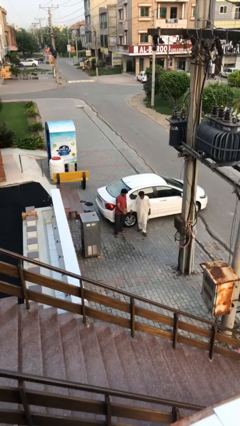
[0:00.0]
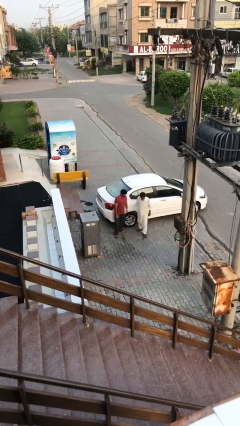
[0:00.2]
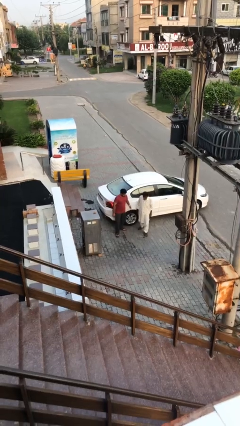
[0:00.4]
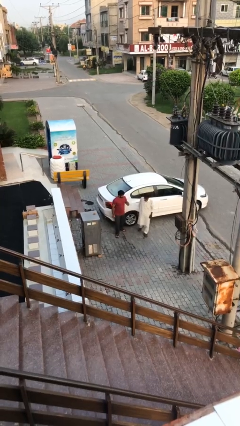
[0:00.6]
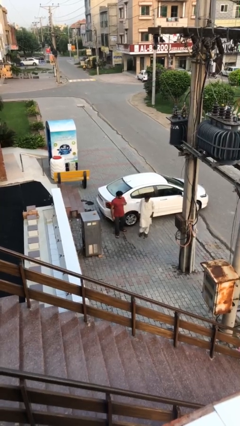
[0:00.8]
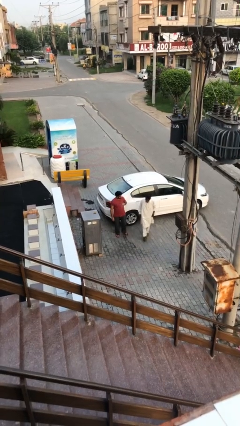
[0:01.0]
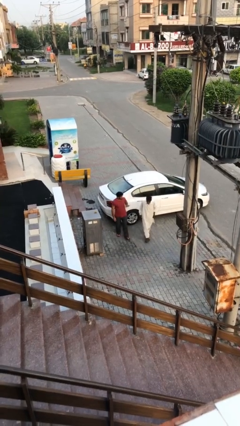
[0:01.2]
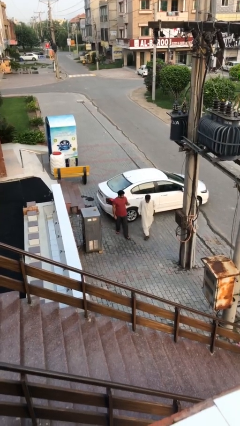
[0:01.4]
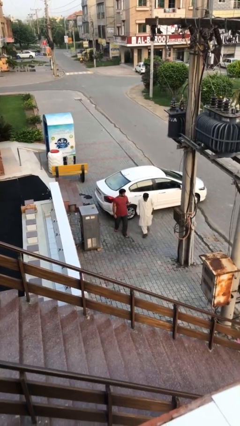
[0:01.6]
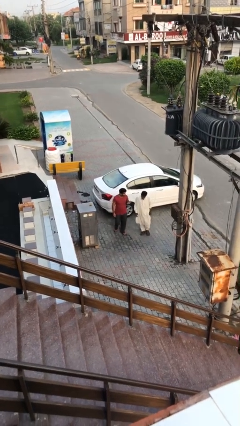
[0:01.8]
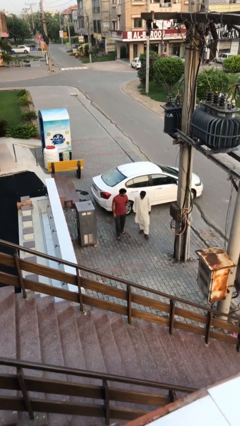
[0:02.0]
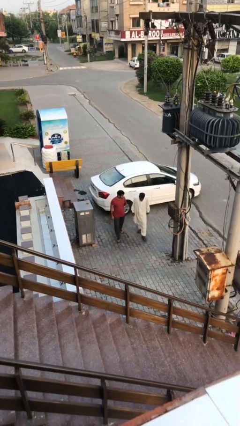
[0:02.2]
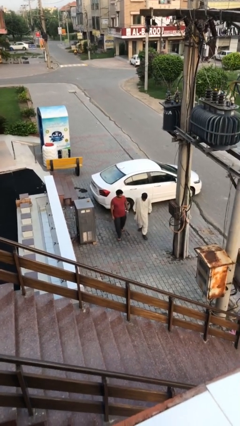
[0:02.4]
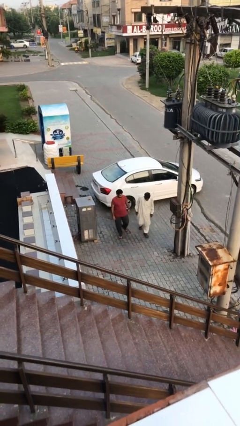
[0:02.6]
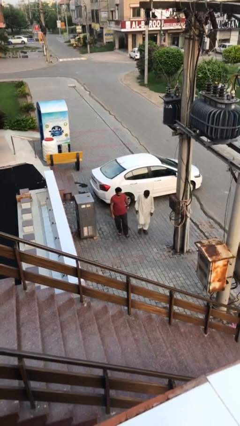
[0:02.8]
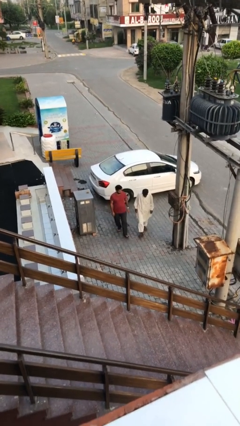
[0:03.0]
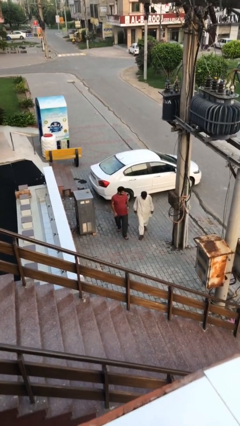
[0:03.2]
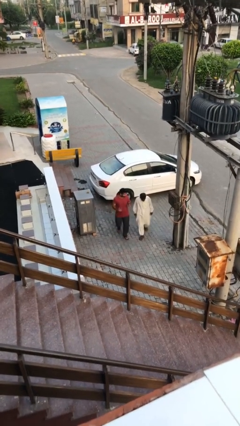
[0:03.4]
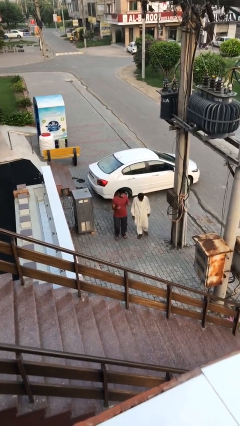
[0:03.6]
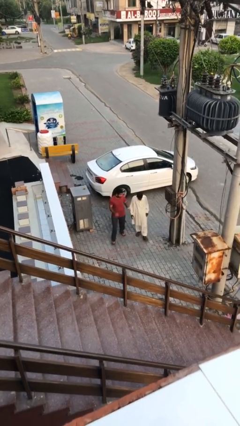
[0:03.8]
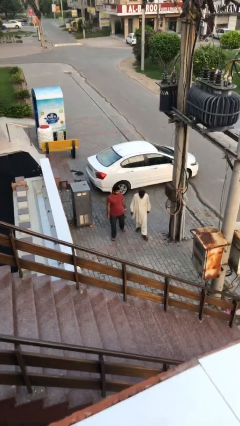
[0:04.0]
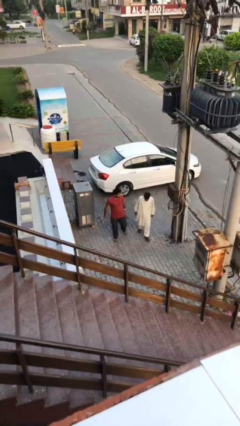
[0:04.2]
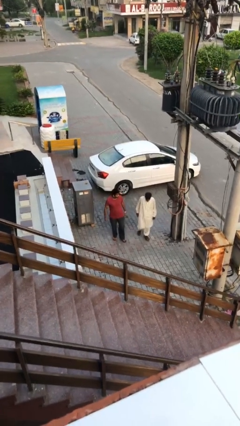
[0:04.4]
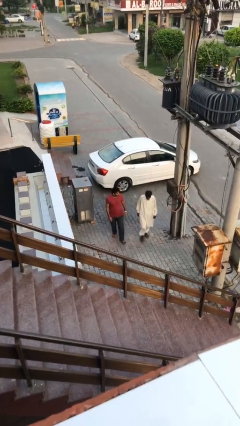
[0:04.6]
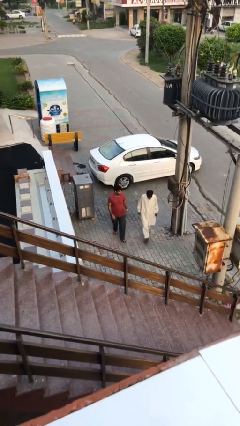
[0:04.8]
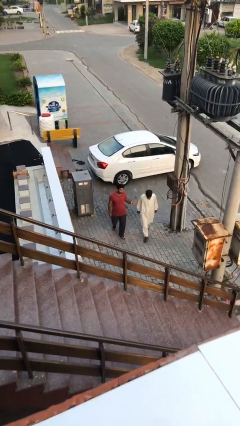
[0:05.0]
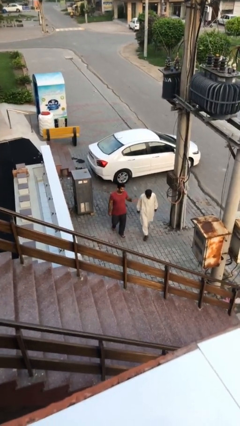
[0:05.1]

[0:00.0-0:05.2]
person talks to person

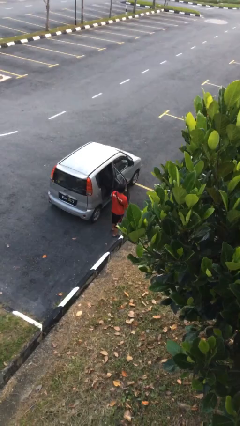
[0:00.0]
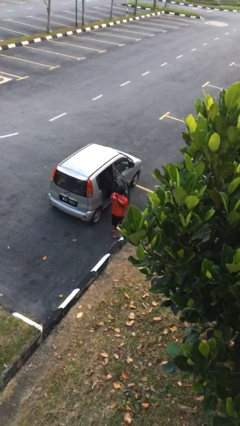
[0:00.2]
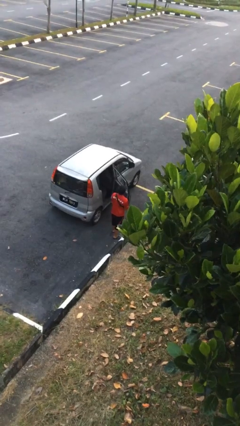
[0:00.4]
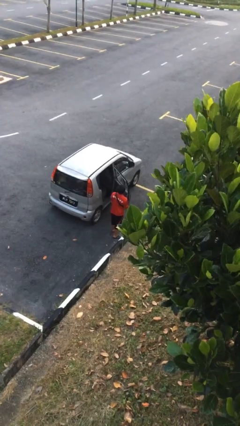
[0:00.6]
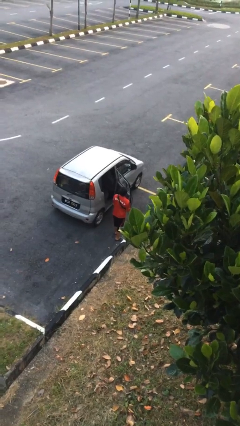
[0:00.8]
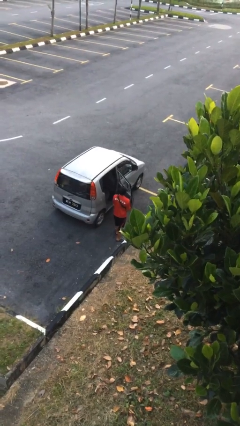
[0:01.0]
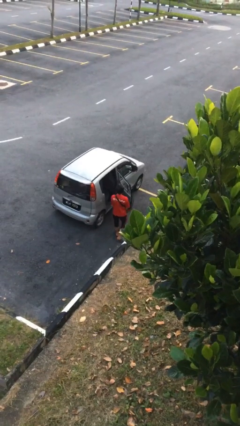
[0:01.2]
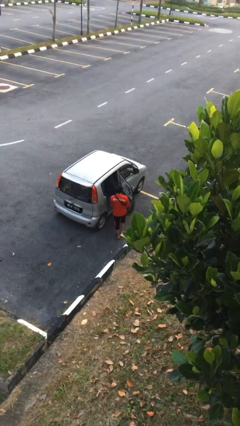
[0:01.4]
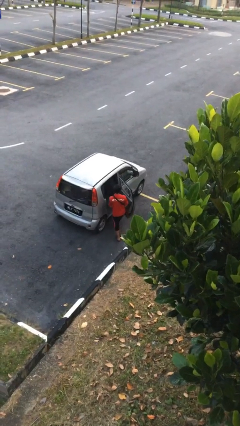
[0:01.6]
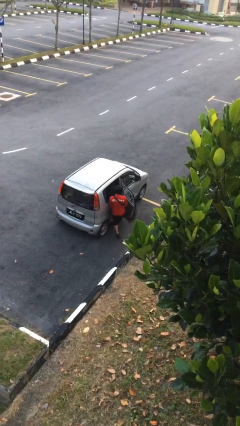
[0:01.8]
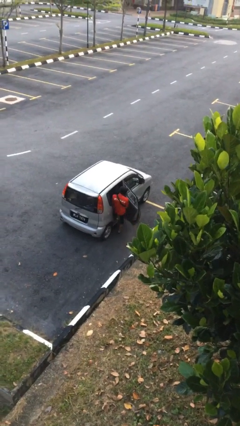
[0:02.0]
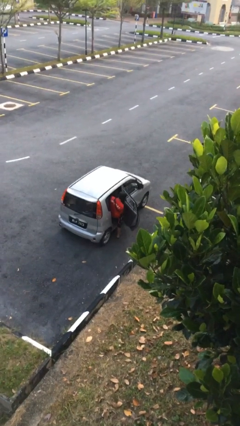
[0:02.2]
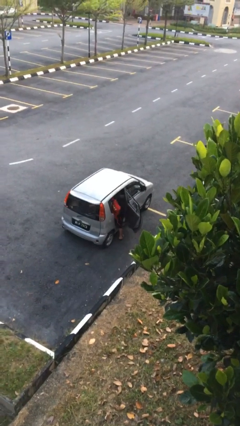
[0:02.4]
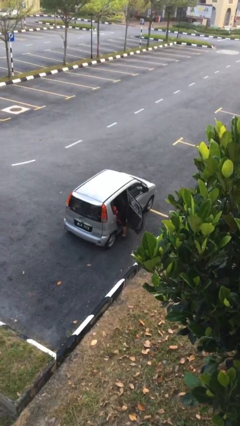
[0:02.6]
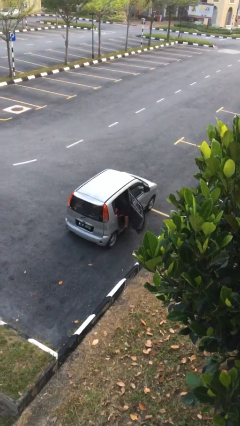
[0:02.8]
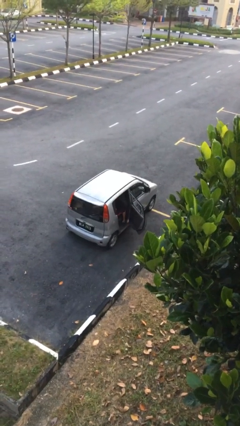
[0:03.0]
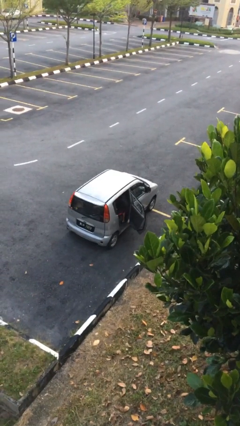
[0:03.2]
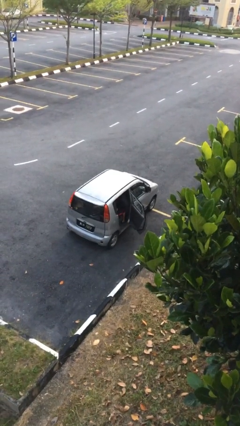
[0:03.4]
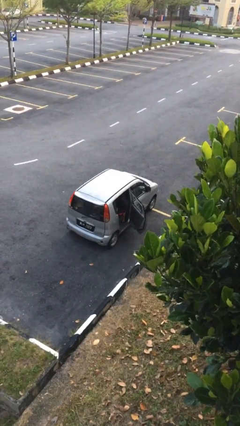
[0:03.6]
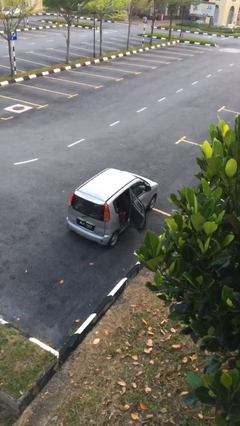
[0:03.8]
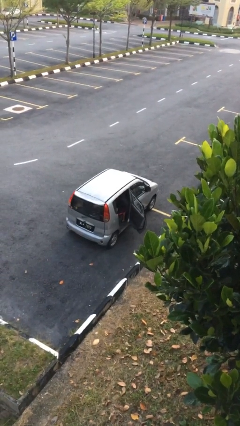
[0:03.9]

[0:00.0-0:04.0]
person enters car

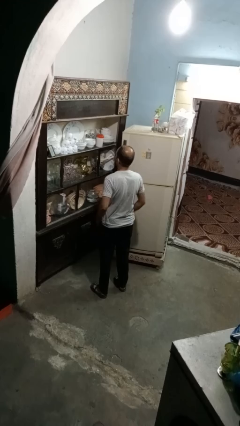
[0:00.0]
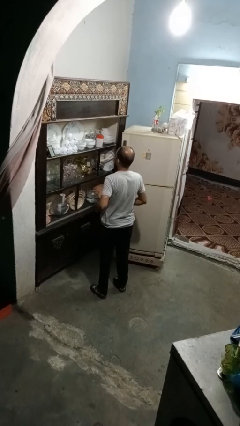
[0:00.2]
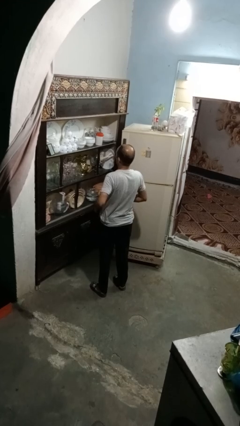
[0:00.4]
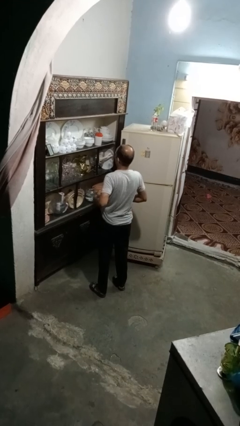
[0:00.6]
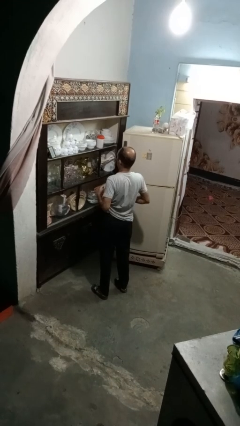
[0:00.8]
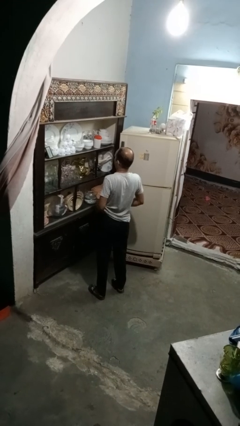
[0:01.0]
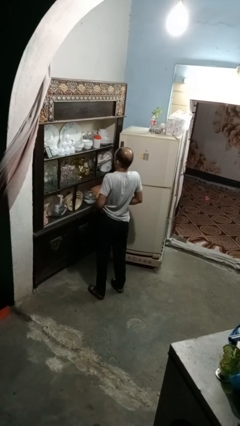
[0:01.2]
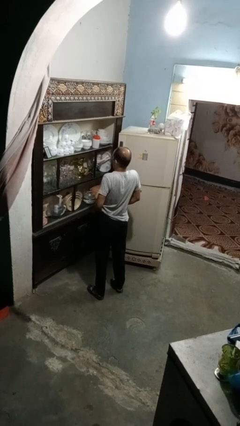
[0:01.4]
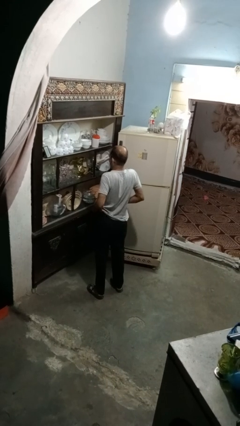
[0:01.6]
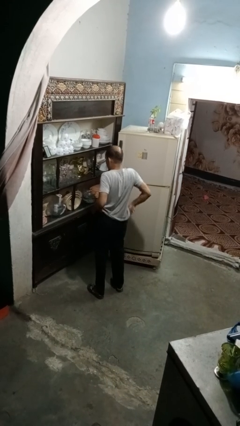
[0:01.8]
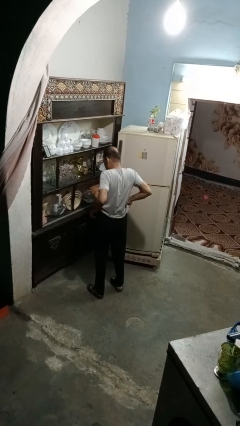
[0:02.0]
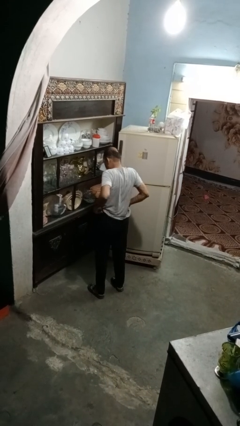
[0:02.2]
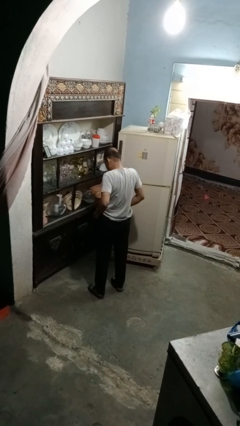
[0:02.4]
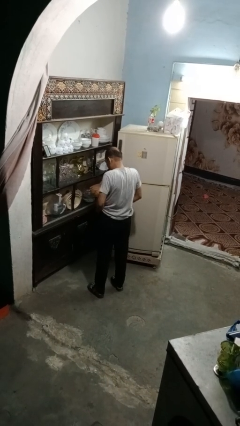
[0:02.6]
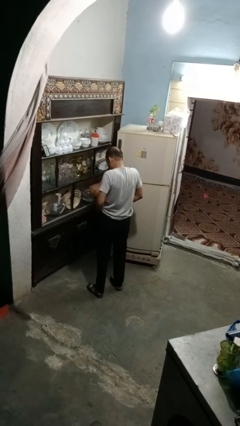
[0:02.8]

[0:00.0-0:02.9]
person hikes up pants

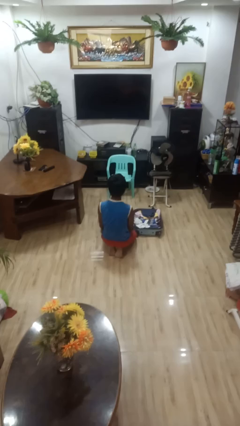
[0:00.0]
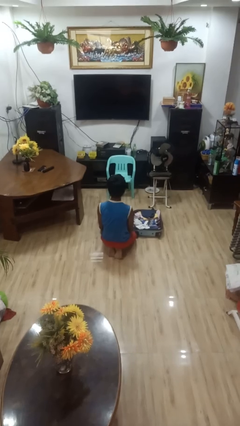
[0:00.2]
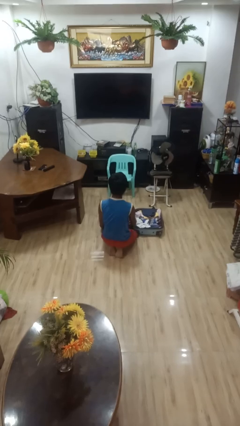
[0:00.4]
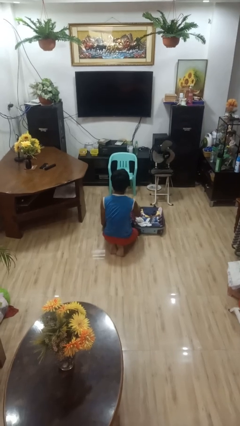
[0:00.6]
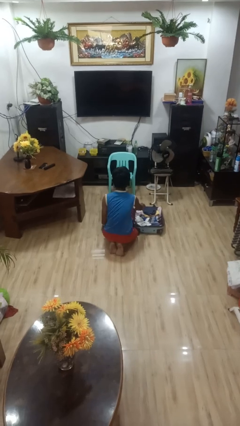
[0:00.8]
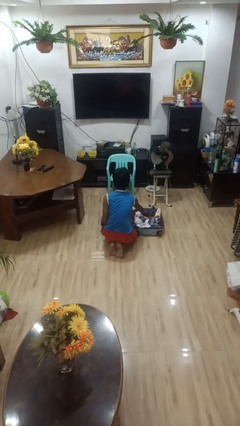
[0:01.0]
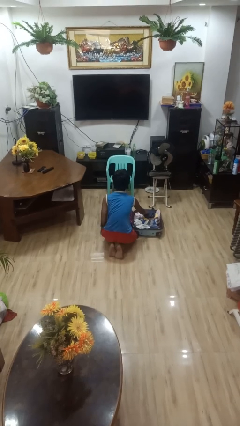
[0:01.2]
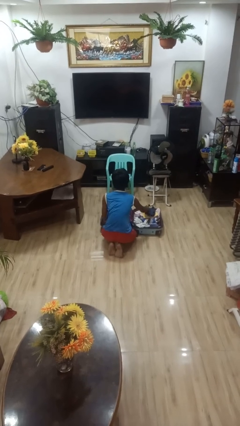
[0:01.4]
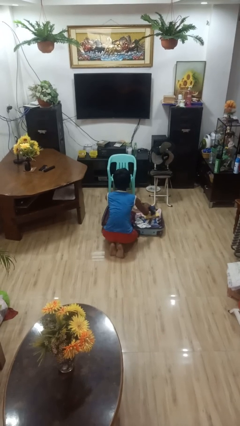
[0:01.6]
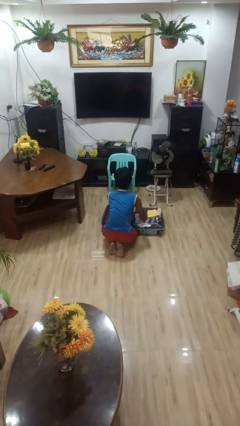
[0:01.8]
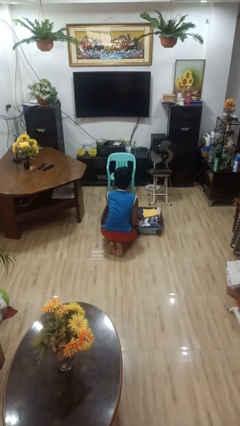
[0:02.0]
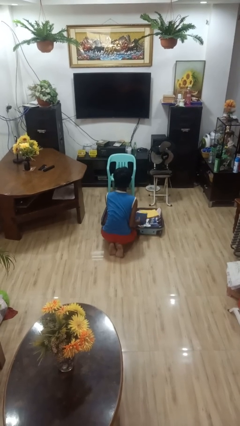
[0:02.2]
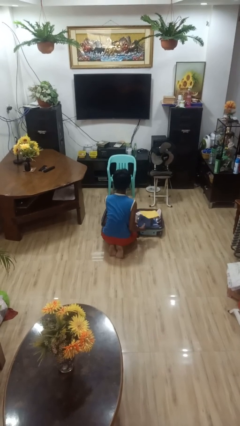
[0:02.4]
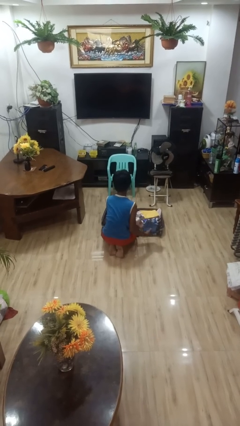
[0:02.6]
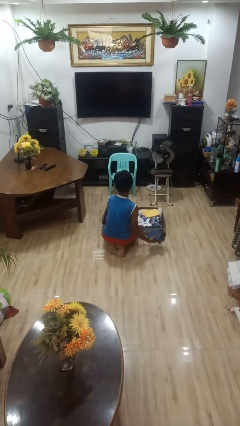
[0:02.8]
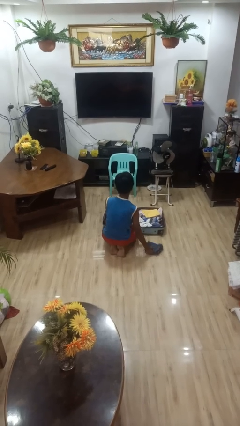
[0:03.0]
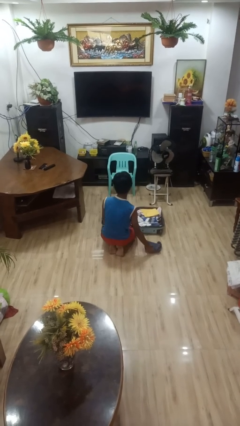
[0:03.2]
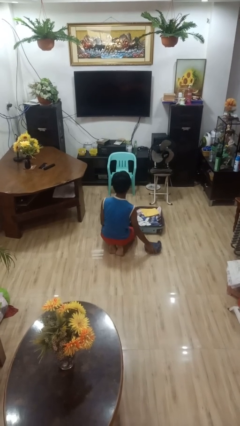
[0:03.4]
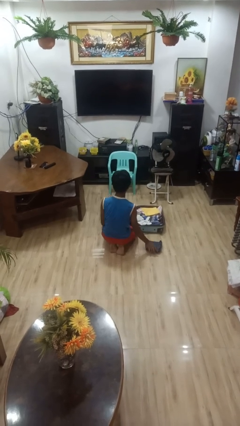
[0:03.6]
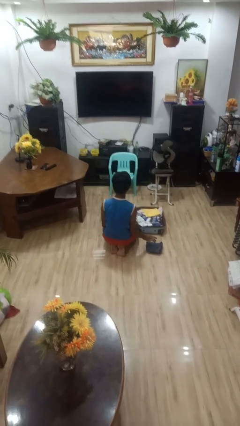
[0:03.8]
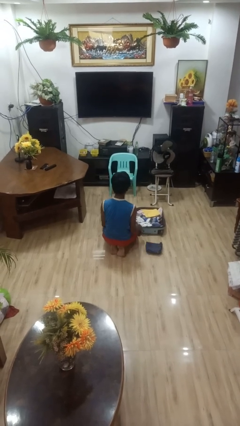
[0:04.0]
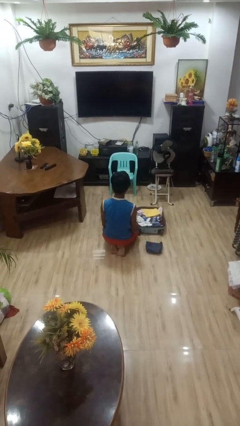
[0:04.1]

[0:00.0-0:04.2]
person unloads clothes from suitcase

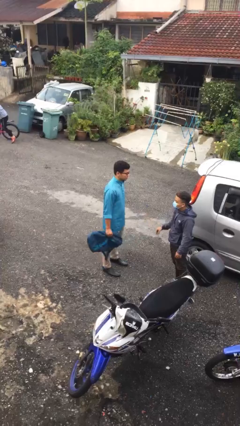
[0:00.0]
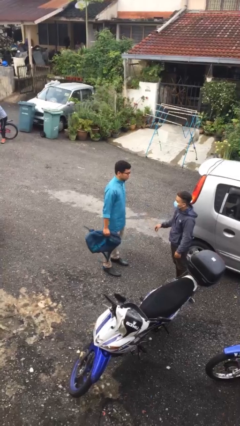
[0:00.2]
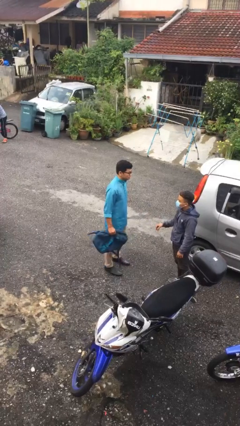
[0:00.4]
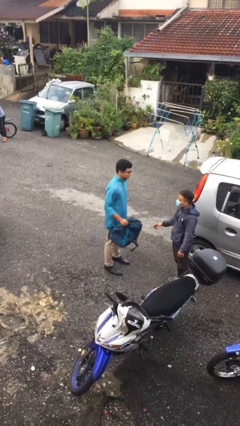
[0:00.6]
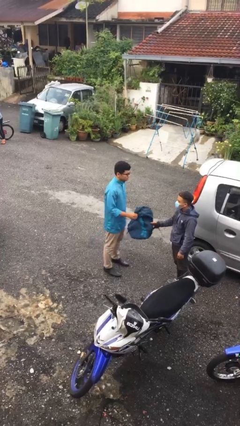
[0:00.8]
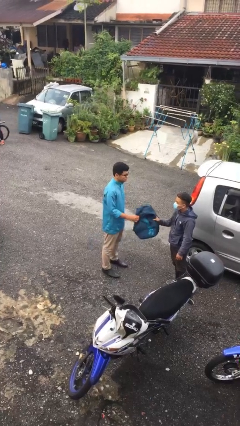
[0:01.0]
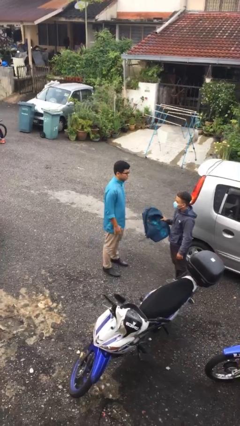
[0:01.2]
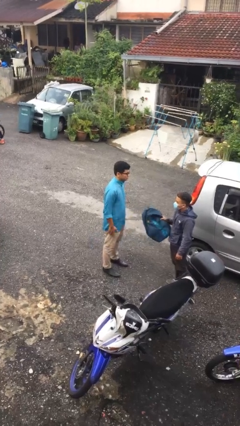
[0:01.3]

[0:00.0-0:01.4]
person transfers object to person

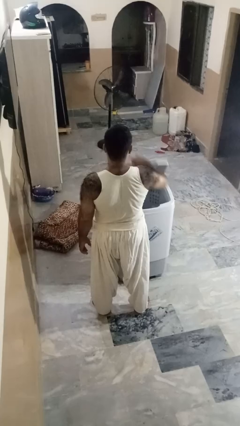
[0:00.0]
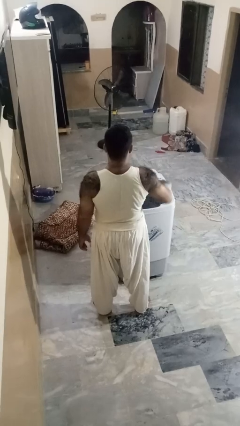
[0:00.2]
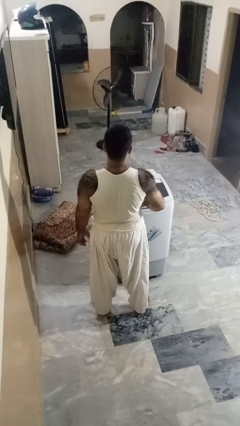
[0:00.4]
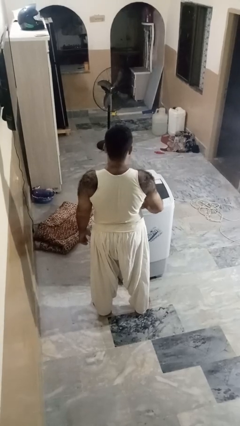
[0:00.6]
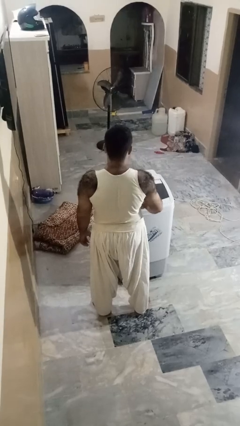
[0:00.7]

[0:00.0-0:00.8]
person closes clothes washer
